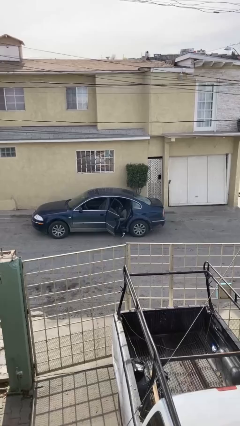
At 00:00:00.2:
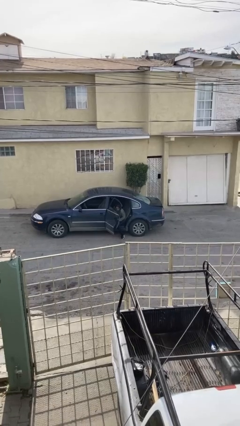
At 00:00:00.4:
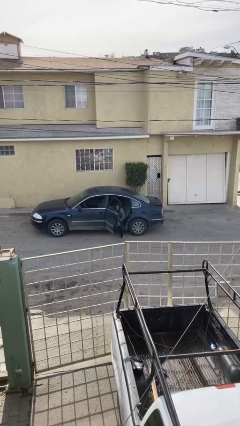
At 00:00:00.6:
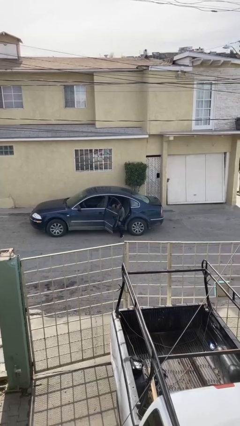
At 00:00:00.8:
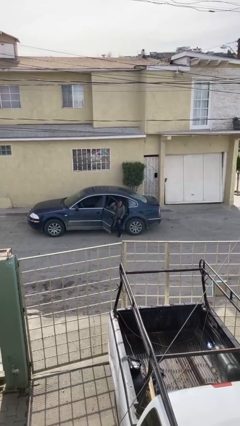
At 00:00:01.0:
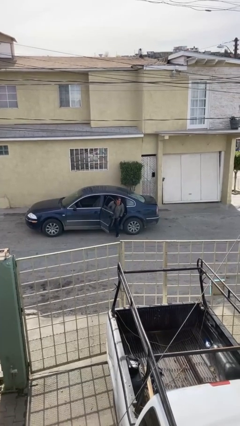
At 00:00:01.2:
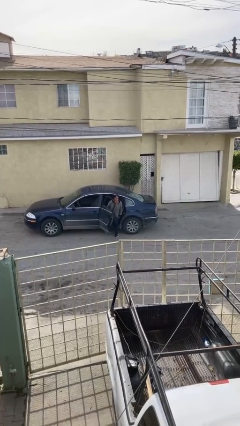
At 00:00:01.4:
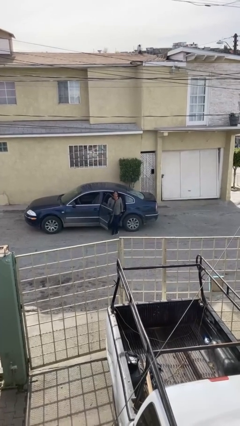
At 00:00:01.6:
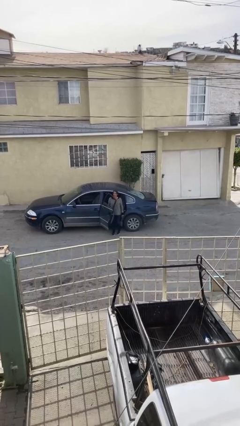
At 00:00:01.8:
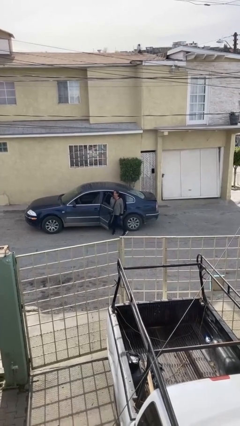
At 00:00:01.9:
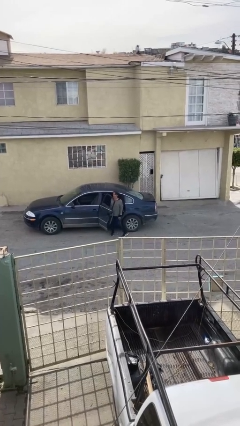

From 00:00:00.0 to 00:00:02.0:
person exits car

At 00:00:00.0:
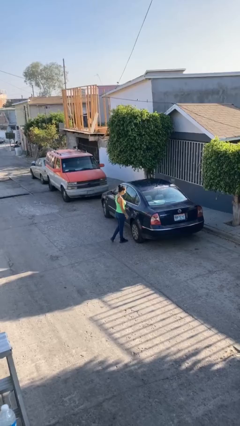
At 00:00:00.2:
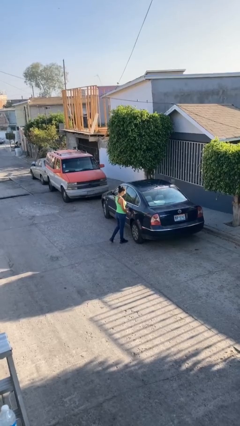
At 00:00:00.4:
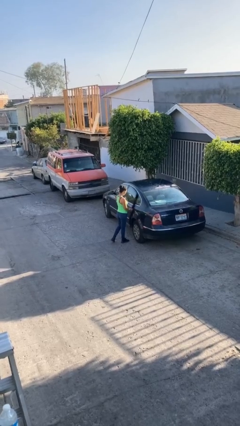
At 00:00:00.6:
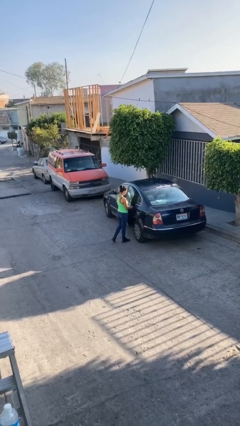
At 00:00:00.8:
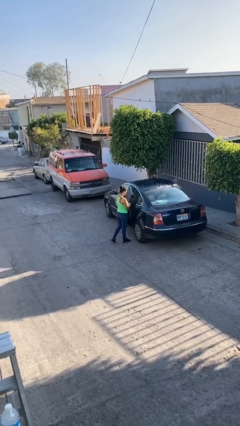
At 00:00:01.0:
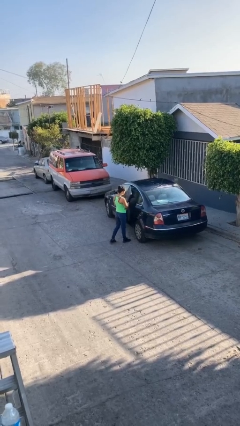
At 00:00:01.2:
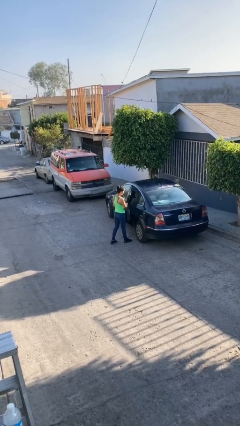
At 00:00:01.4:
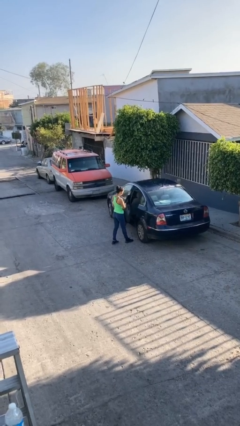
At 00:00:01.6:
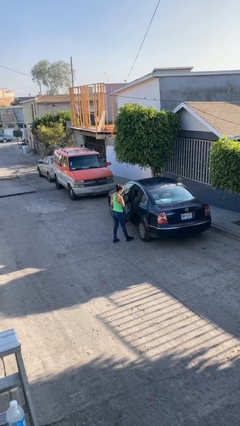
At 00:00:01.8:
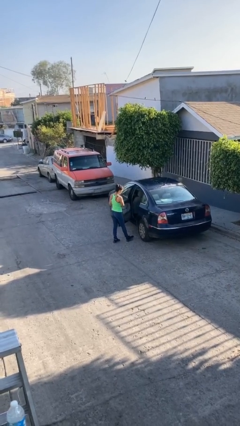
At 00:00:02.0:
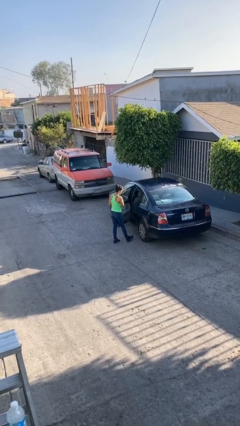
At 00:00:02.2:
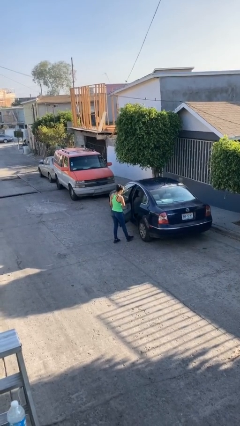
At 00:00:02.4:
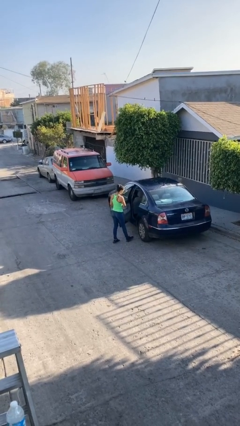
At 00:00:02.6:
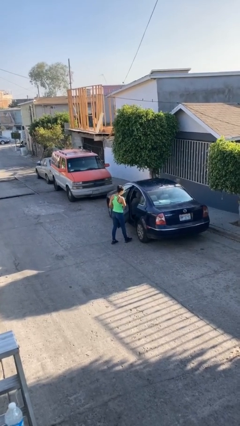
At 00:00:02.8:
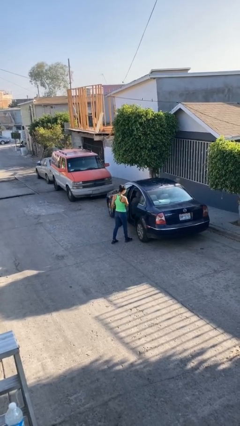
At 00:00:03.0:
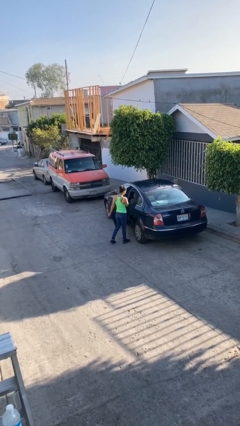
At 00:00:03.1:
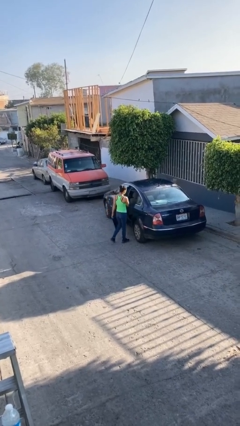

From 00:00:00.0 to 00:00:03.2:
person opens car door

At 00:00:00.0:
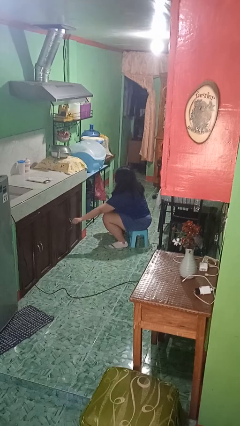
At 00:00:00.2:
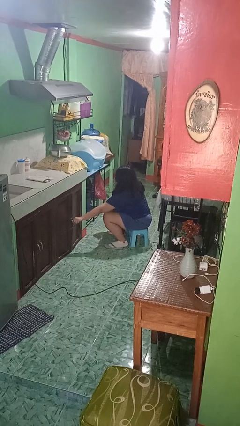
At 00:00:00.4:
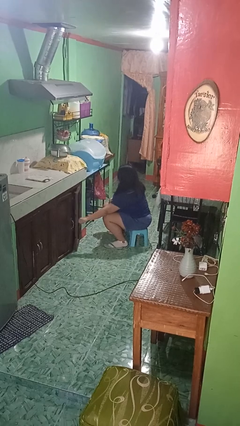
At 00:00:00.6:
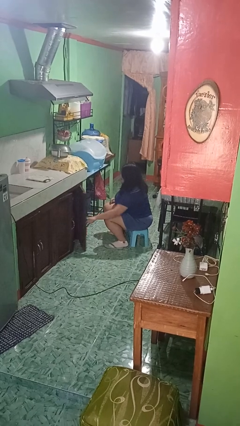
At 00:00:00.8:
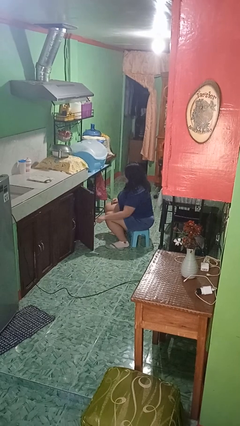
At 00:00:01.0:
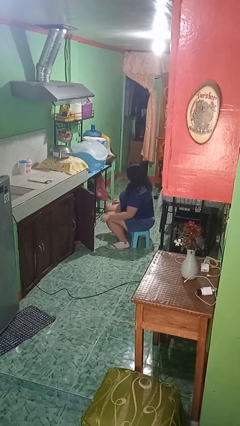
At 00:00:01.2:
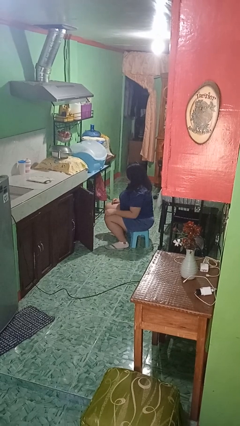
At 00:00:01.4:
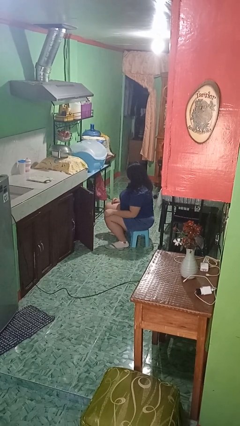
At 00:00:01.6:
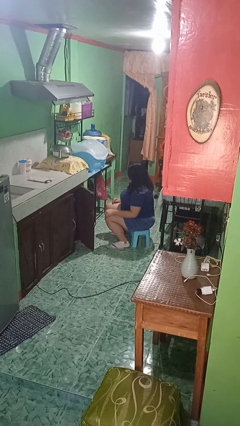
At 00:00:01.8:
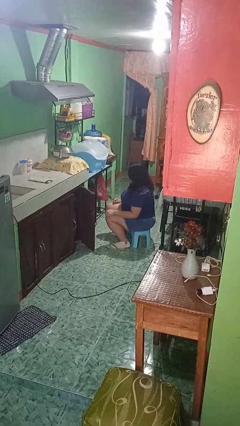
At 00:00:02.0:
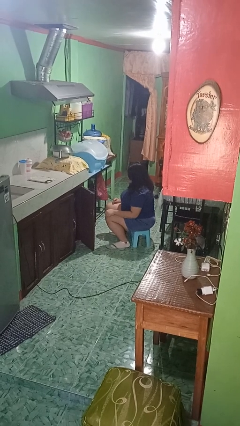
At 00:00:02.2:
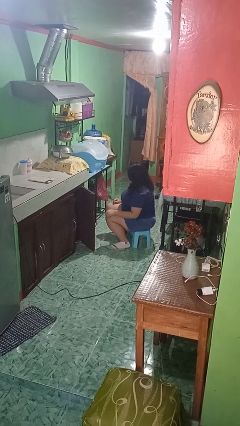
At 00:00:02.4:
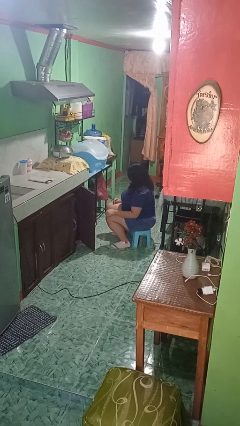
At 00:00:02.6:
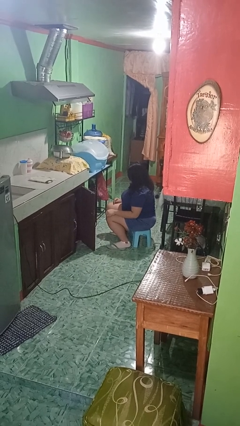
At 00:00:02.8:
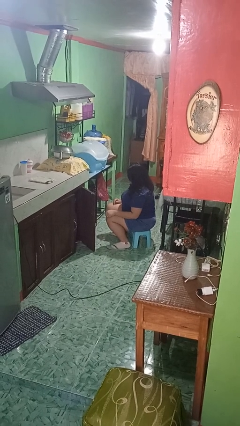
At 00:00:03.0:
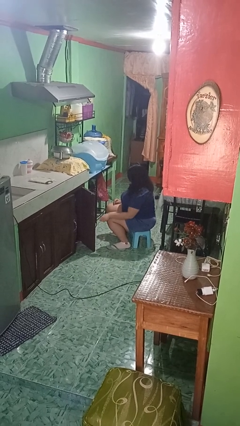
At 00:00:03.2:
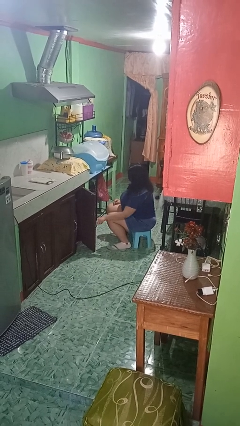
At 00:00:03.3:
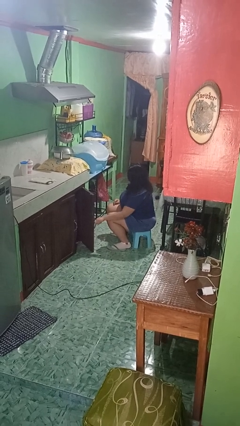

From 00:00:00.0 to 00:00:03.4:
person opens cabinet

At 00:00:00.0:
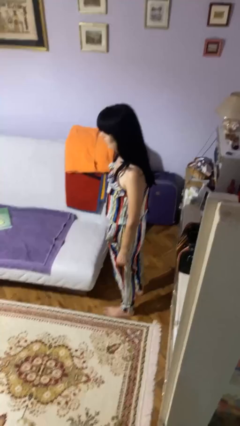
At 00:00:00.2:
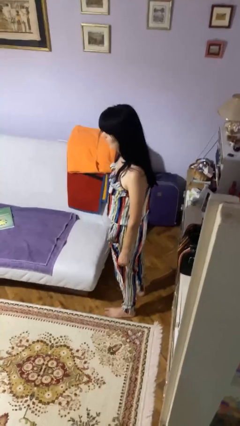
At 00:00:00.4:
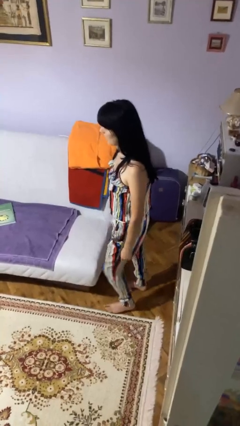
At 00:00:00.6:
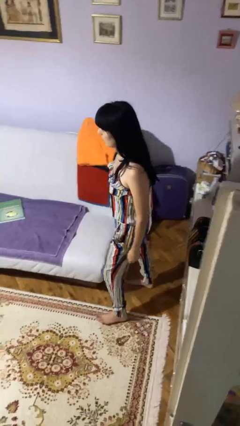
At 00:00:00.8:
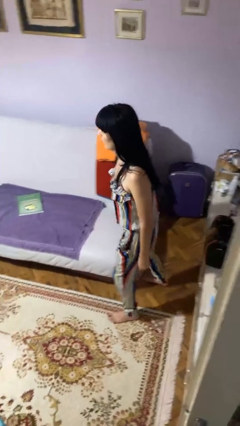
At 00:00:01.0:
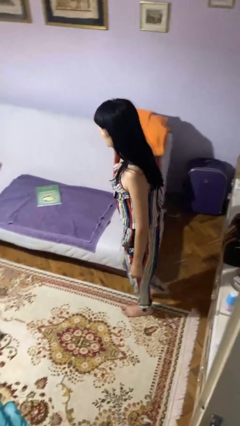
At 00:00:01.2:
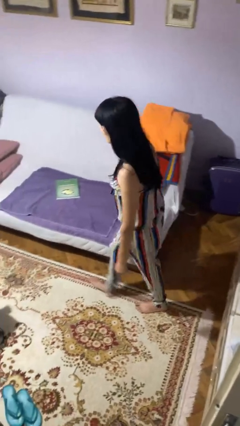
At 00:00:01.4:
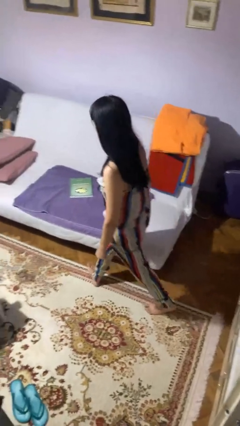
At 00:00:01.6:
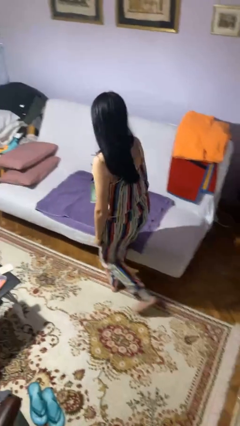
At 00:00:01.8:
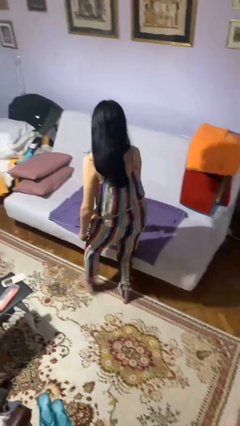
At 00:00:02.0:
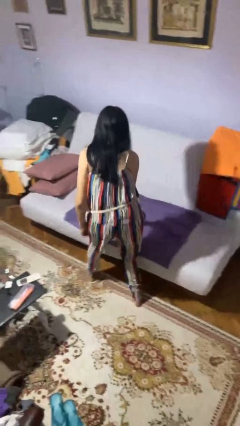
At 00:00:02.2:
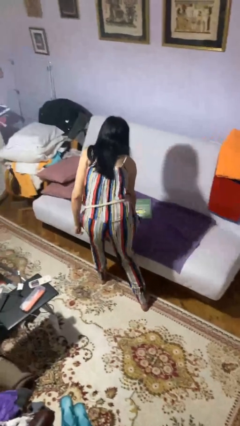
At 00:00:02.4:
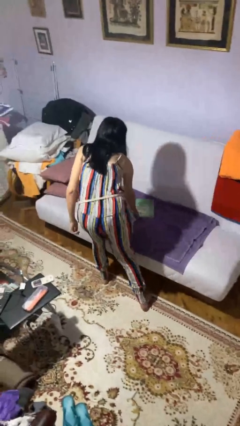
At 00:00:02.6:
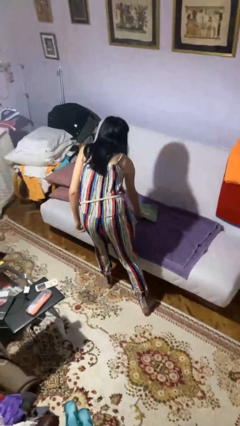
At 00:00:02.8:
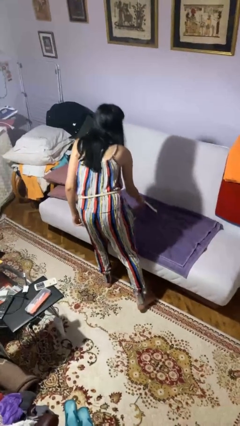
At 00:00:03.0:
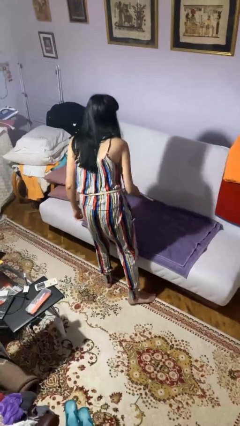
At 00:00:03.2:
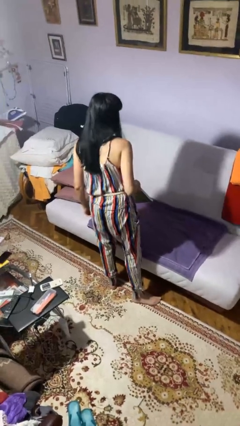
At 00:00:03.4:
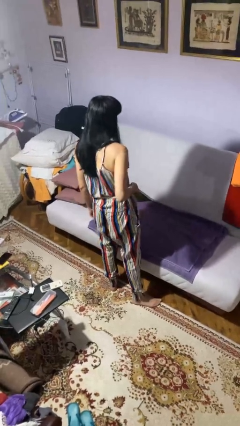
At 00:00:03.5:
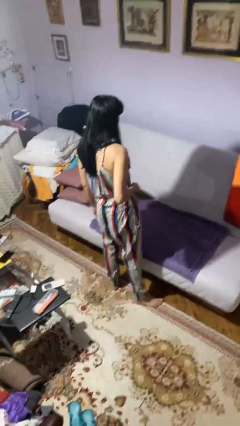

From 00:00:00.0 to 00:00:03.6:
person picks up object from bed

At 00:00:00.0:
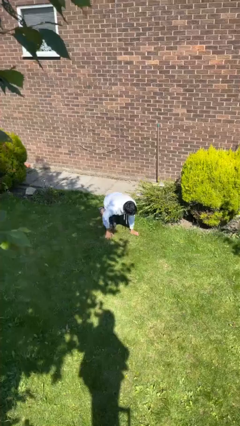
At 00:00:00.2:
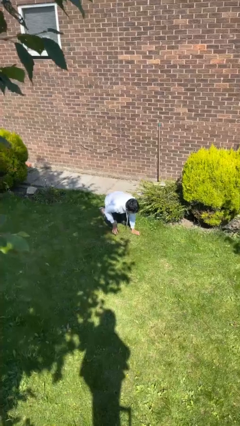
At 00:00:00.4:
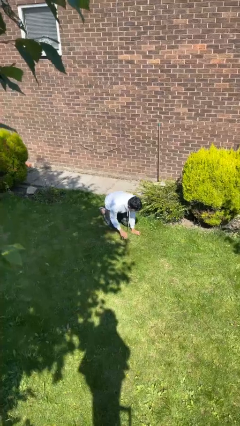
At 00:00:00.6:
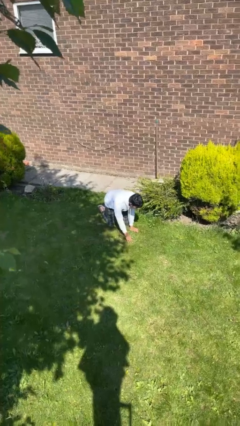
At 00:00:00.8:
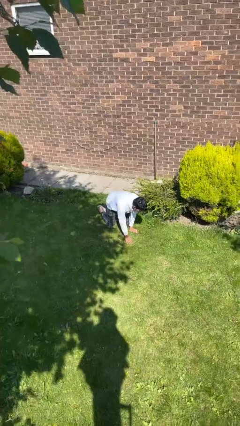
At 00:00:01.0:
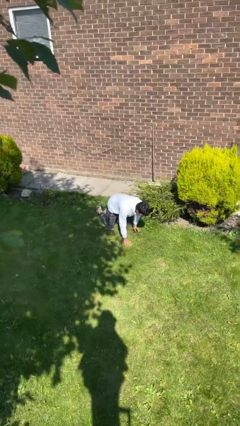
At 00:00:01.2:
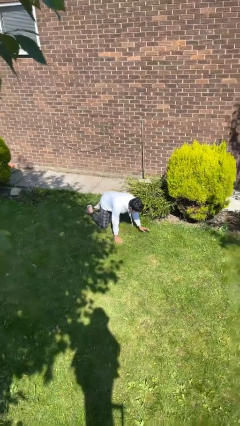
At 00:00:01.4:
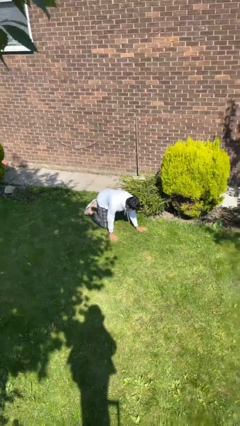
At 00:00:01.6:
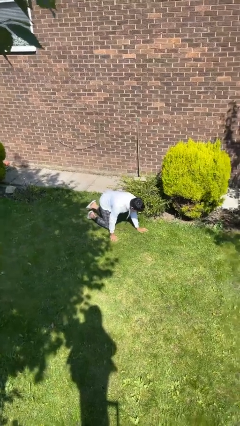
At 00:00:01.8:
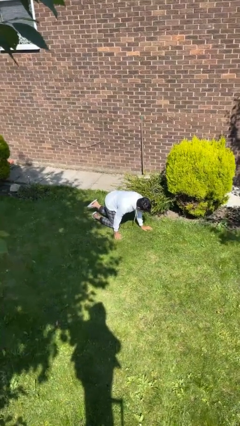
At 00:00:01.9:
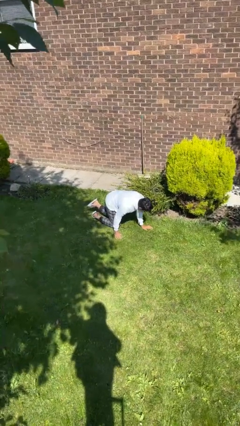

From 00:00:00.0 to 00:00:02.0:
person crawls

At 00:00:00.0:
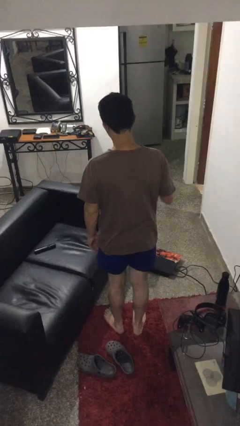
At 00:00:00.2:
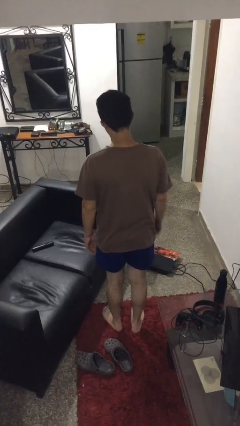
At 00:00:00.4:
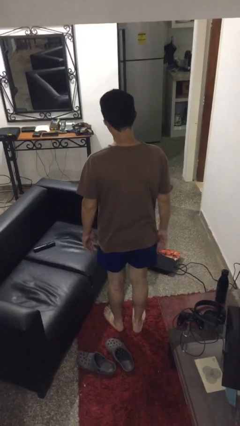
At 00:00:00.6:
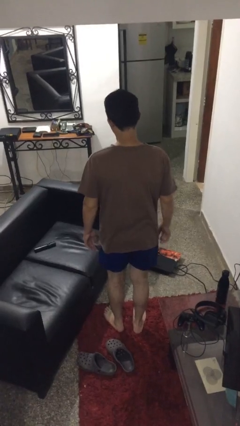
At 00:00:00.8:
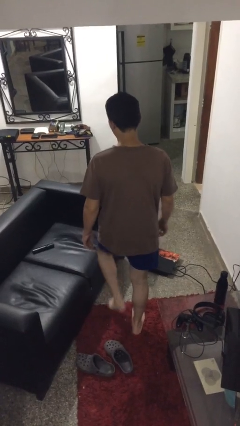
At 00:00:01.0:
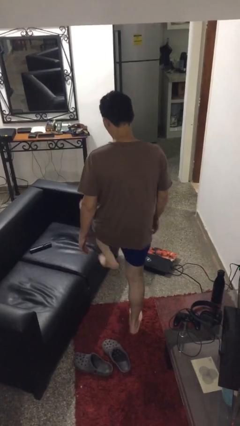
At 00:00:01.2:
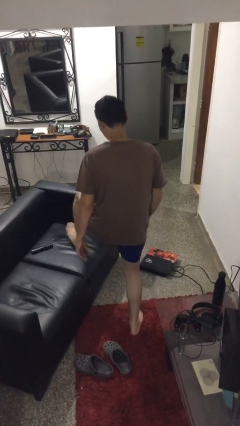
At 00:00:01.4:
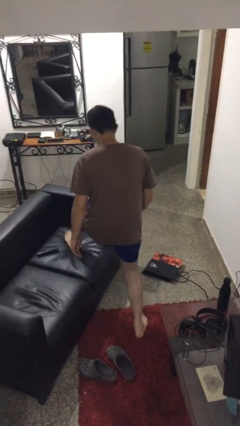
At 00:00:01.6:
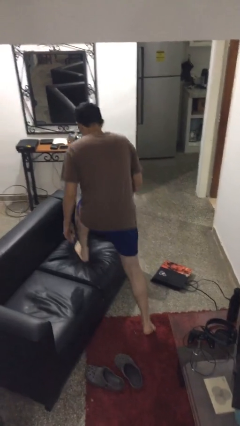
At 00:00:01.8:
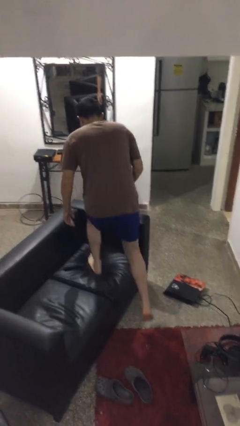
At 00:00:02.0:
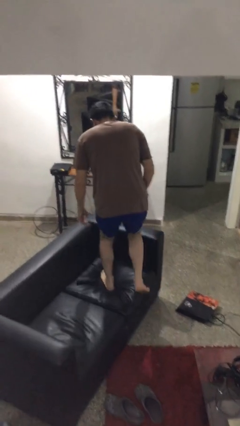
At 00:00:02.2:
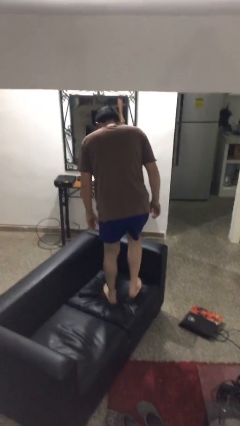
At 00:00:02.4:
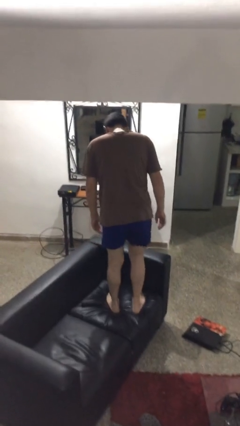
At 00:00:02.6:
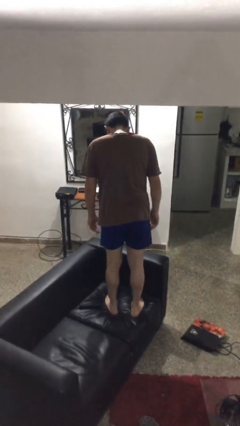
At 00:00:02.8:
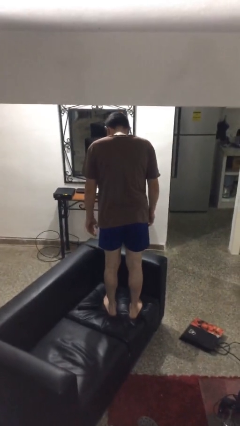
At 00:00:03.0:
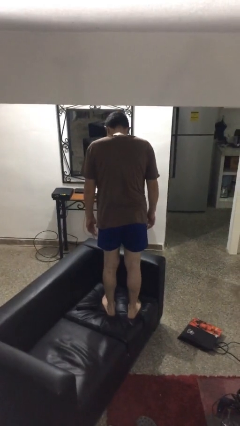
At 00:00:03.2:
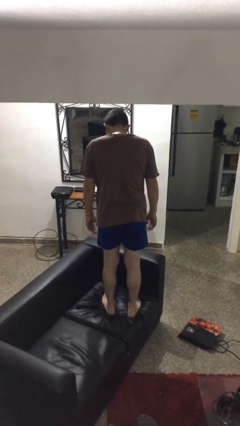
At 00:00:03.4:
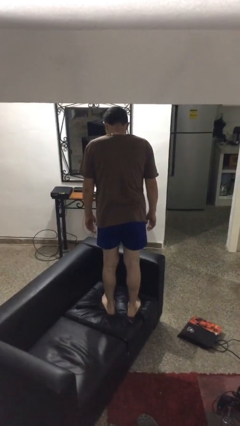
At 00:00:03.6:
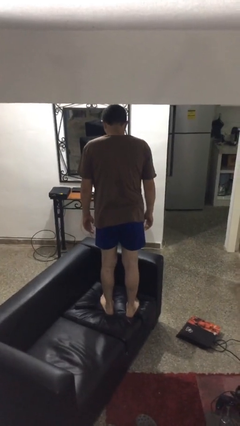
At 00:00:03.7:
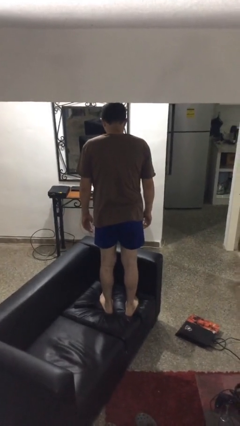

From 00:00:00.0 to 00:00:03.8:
person climbs on couch
